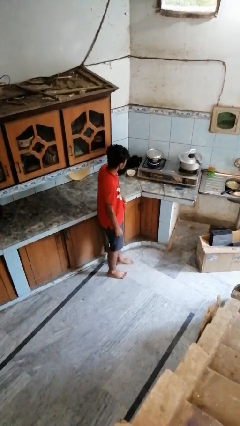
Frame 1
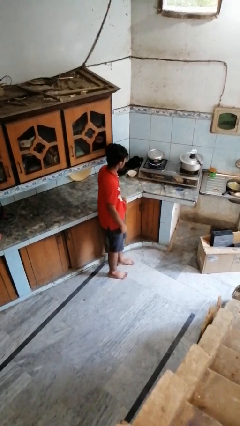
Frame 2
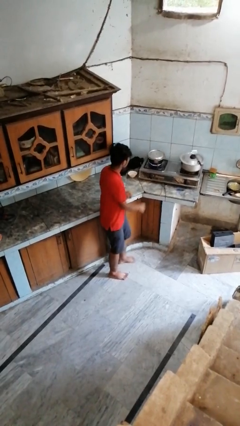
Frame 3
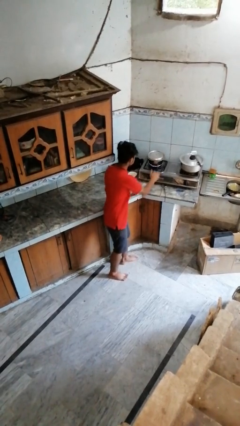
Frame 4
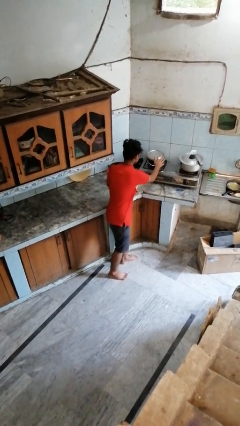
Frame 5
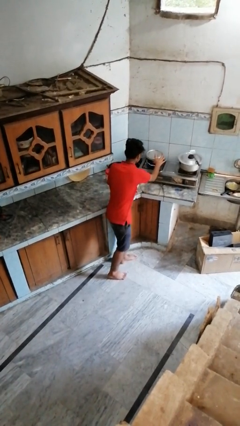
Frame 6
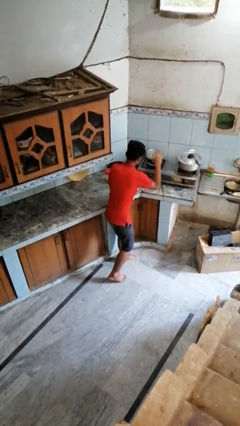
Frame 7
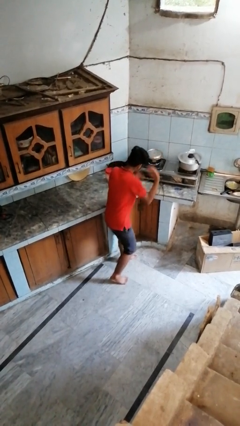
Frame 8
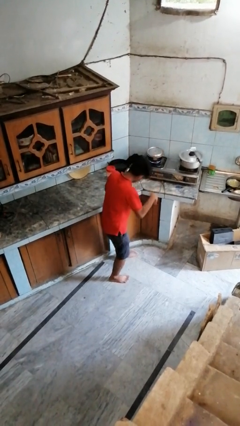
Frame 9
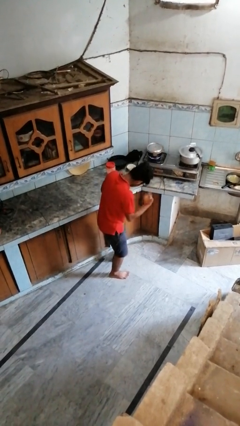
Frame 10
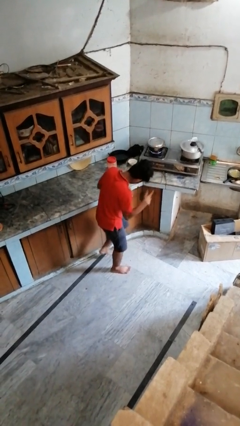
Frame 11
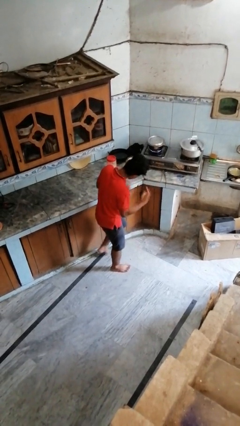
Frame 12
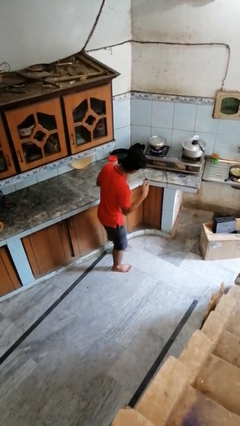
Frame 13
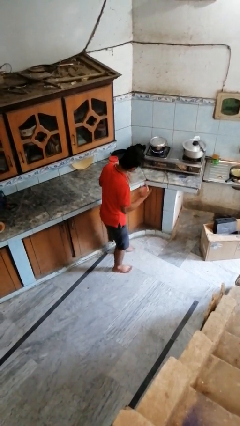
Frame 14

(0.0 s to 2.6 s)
person burns hand

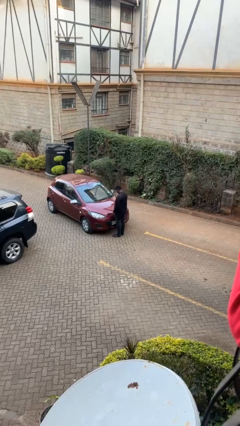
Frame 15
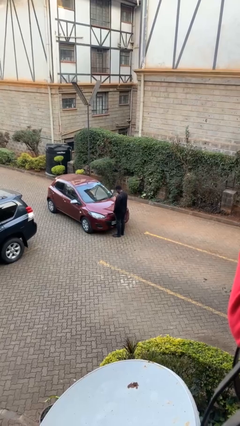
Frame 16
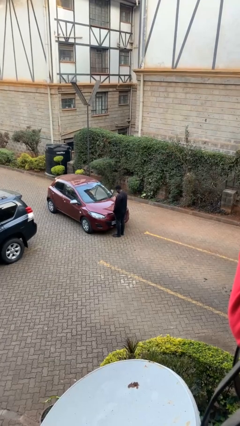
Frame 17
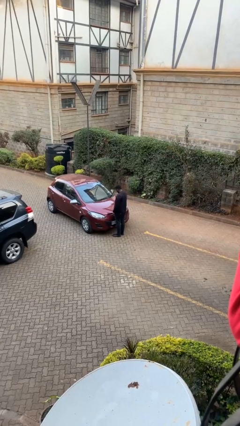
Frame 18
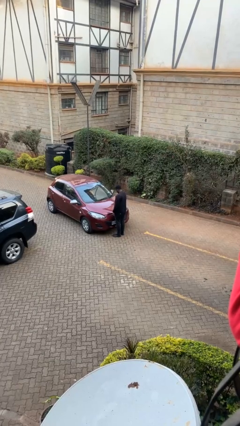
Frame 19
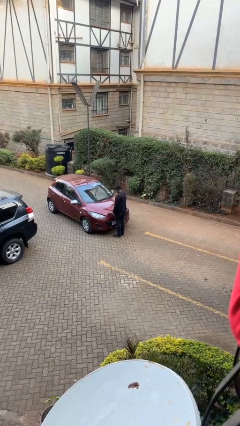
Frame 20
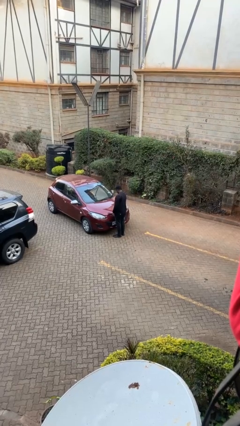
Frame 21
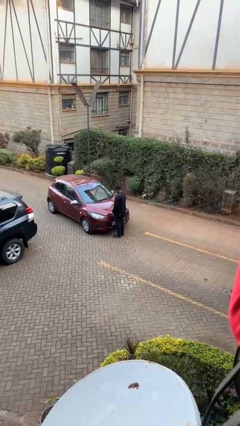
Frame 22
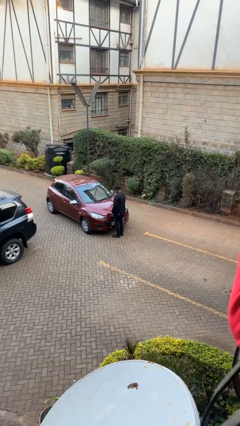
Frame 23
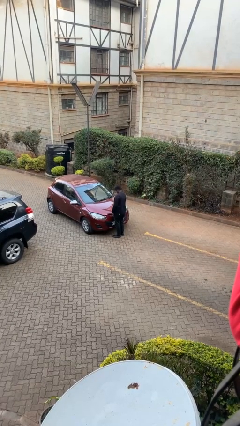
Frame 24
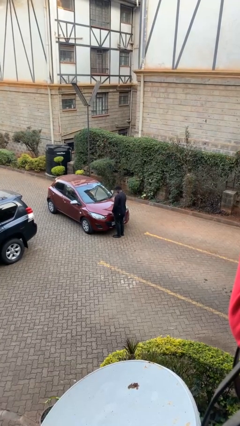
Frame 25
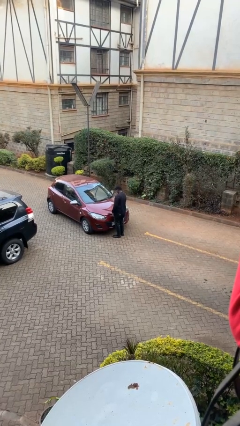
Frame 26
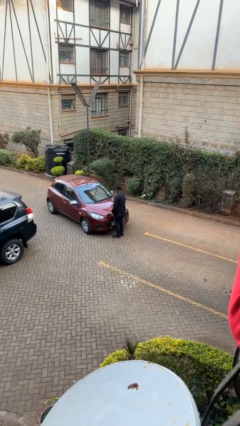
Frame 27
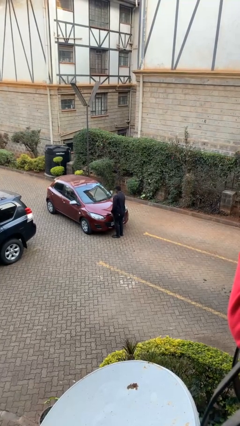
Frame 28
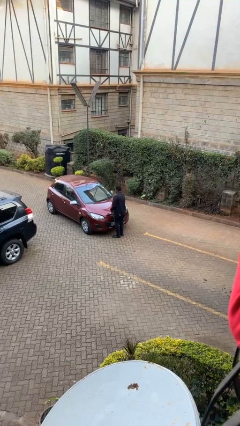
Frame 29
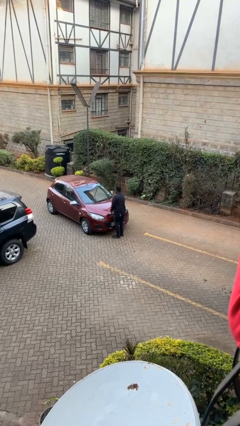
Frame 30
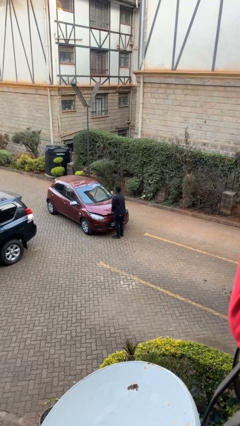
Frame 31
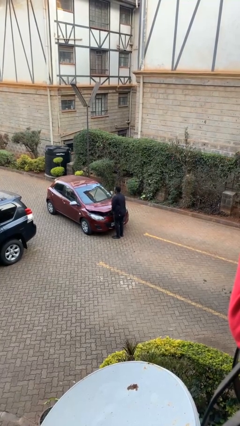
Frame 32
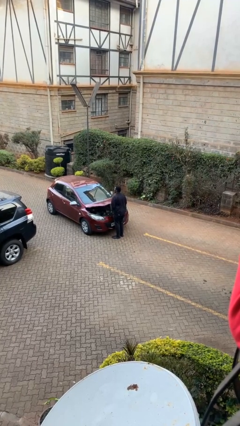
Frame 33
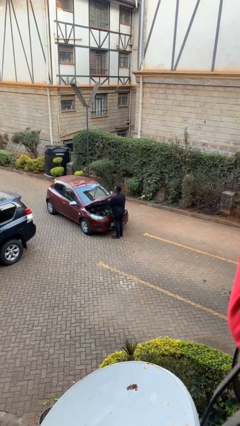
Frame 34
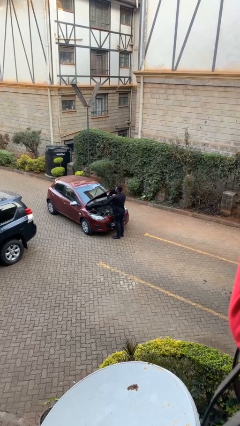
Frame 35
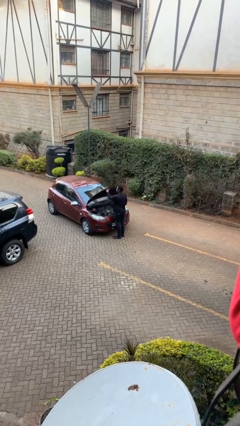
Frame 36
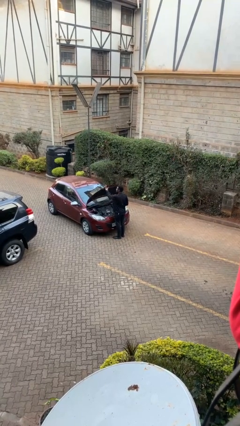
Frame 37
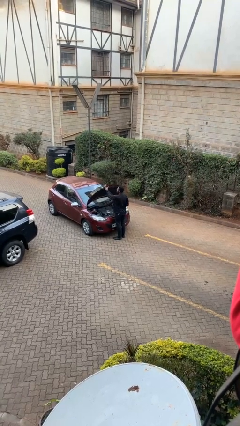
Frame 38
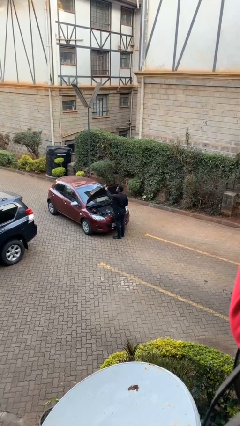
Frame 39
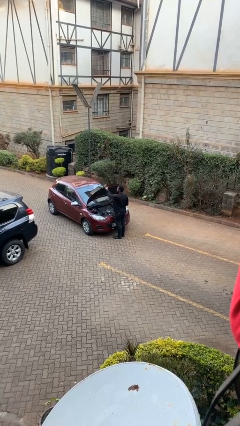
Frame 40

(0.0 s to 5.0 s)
person opens car hood

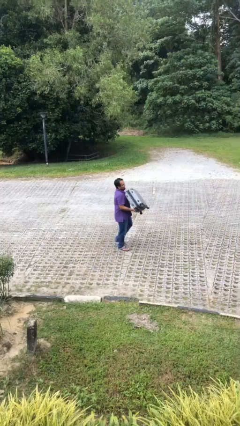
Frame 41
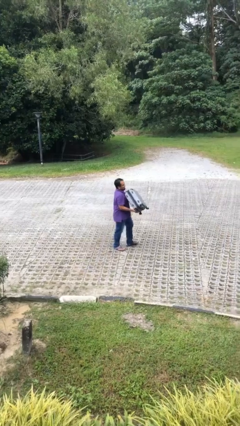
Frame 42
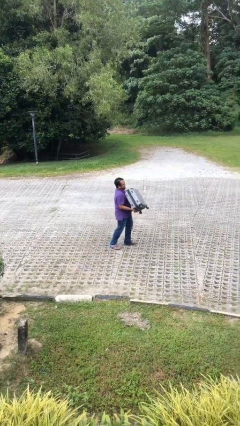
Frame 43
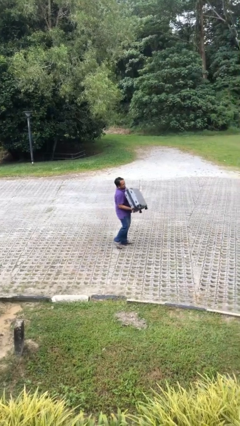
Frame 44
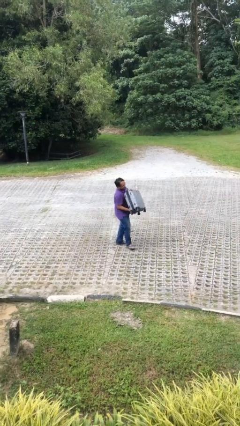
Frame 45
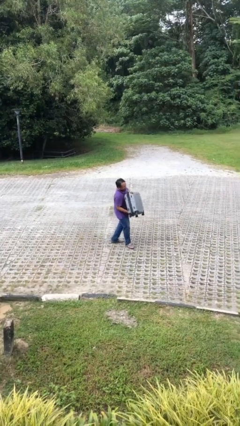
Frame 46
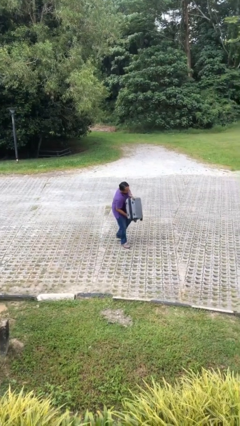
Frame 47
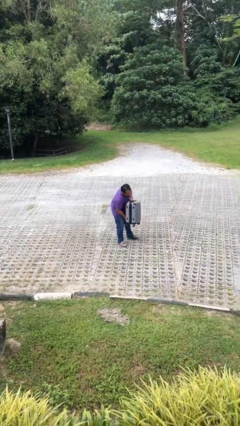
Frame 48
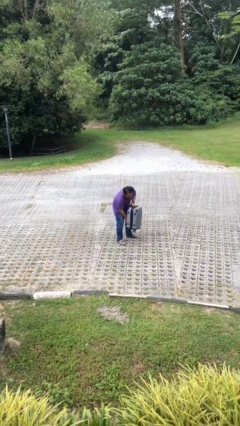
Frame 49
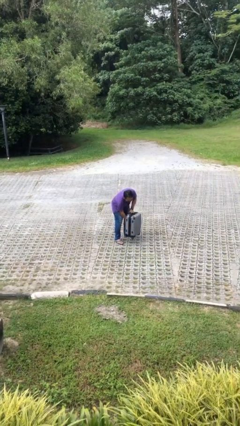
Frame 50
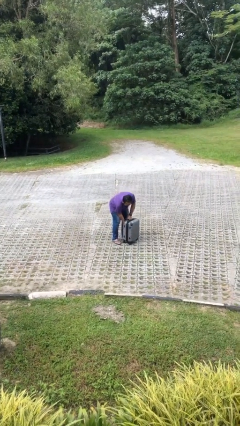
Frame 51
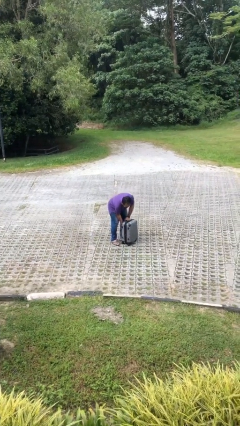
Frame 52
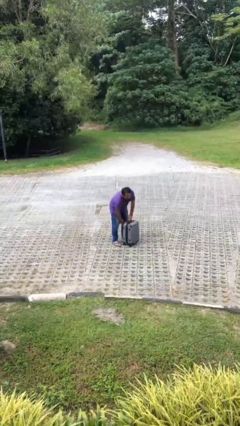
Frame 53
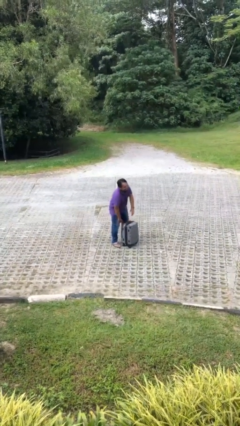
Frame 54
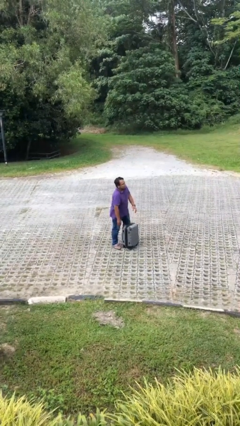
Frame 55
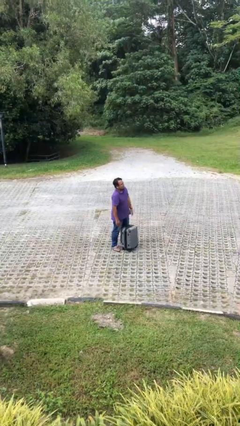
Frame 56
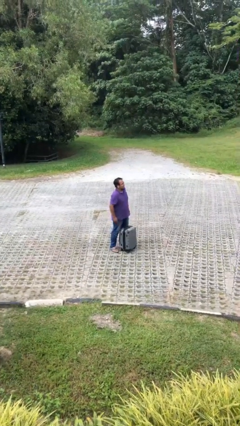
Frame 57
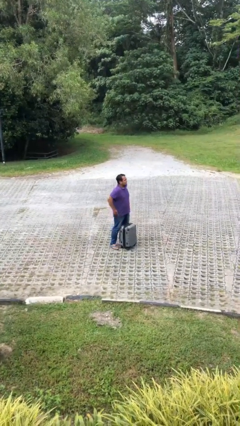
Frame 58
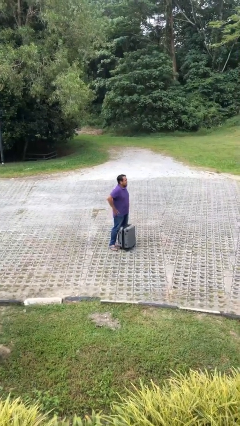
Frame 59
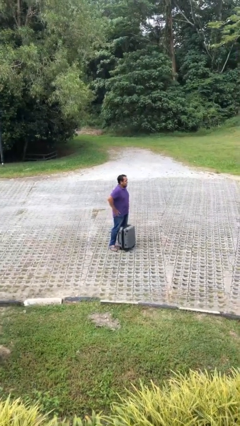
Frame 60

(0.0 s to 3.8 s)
person puts down object on floor

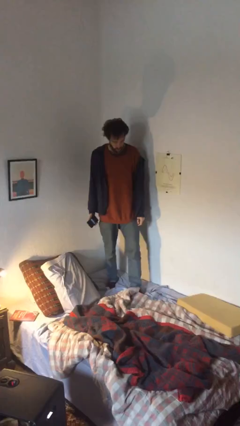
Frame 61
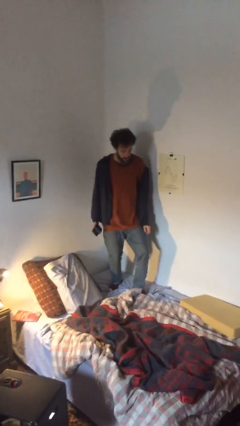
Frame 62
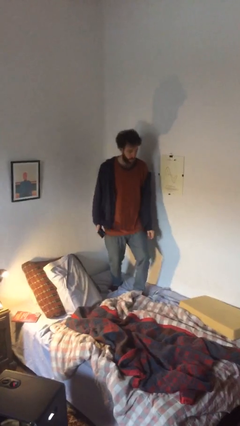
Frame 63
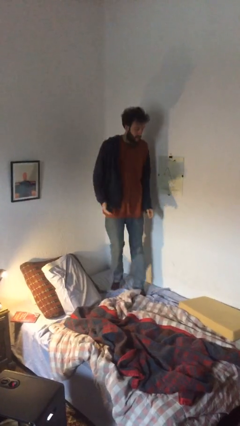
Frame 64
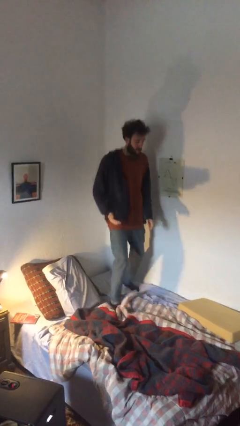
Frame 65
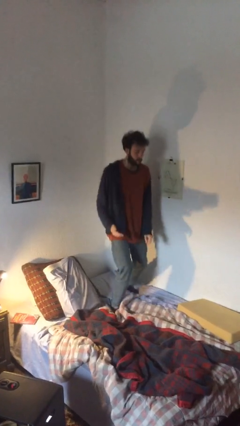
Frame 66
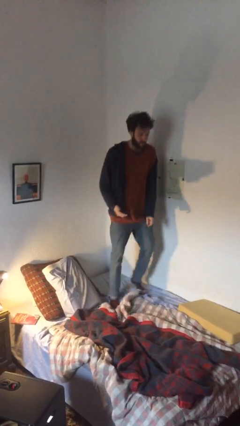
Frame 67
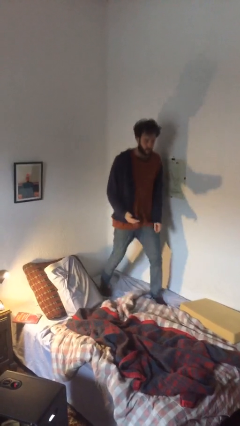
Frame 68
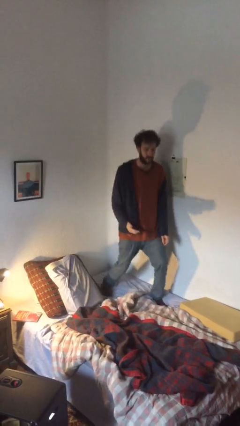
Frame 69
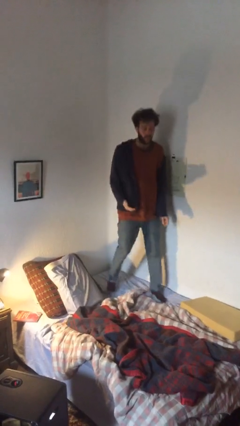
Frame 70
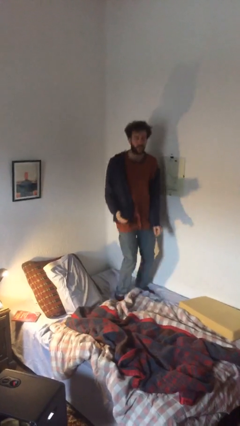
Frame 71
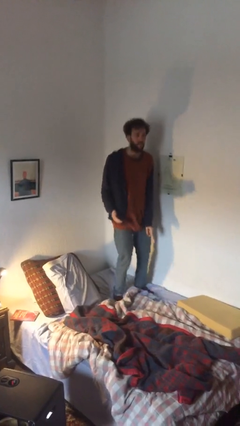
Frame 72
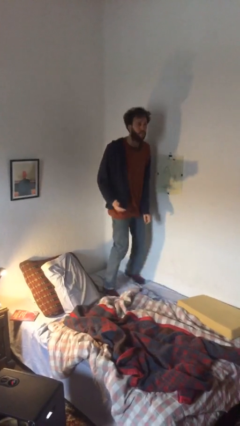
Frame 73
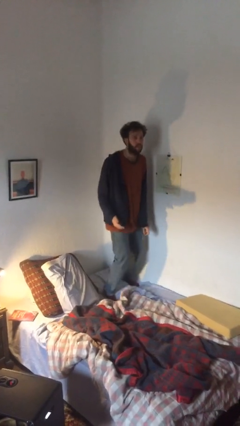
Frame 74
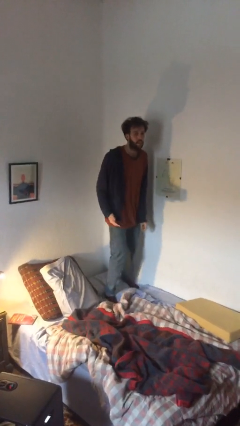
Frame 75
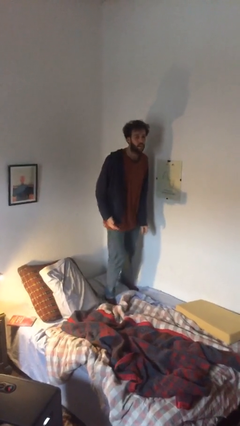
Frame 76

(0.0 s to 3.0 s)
person jumps on bed

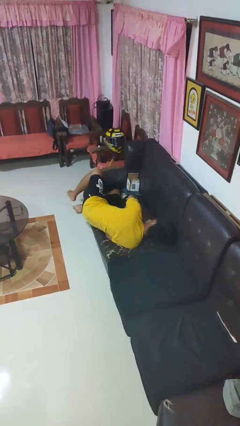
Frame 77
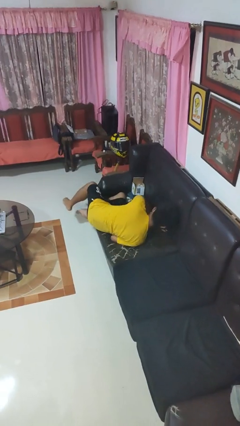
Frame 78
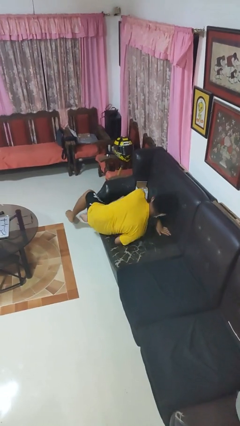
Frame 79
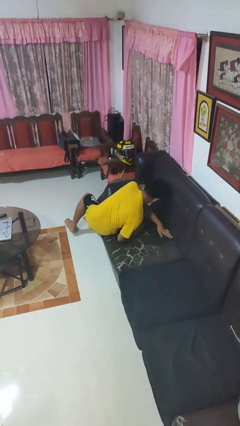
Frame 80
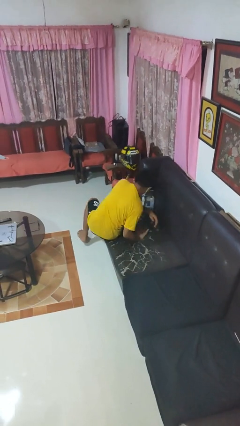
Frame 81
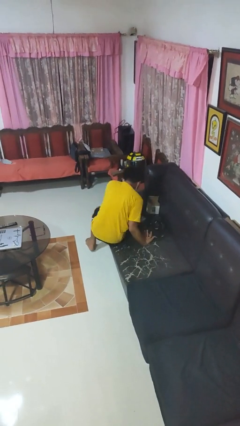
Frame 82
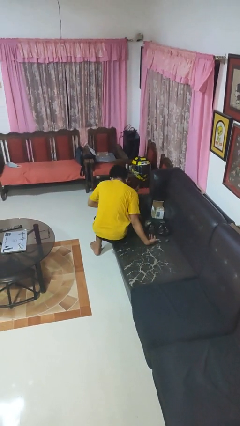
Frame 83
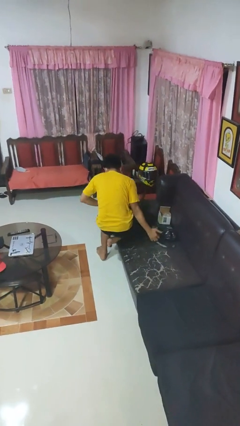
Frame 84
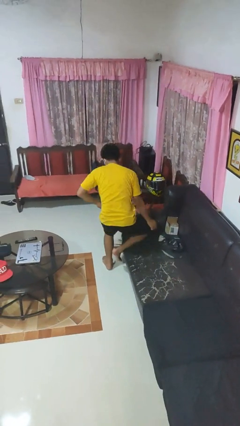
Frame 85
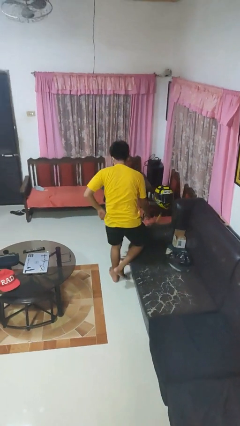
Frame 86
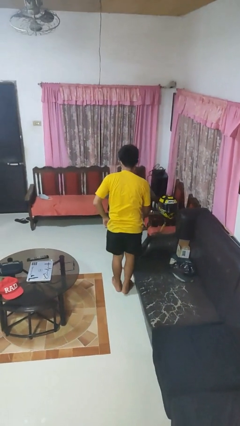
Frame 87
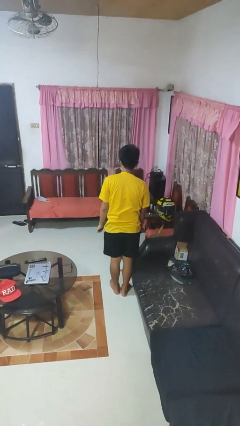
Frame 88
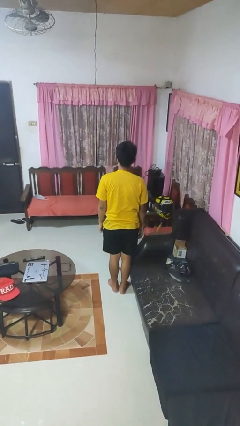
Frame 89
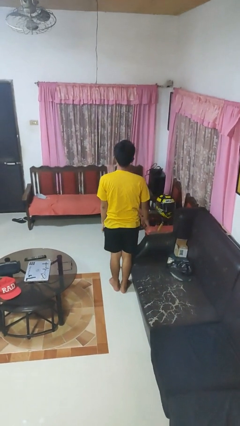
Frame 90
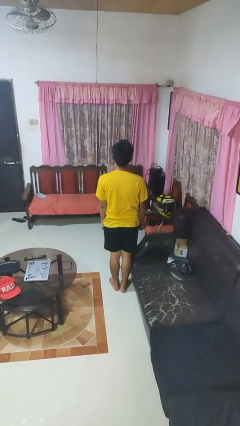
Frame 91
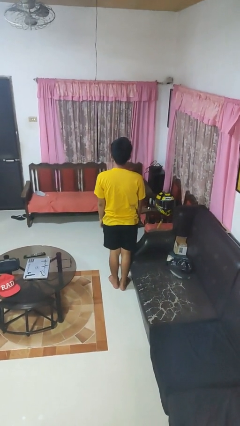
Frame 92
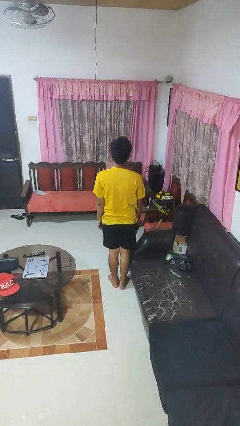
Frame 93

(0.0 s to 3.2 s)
person stands up
